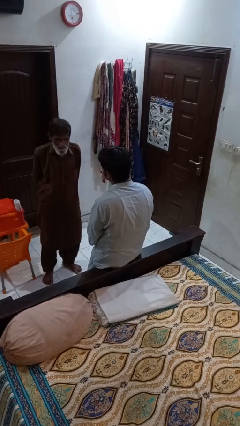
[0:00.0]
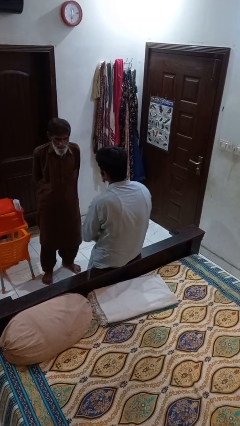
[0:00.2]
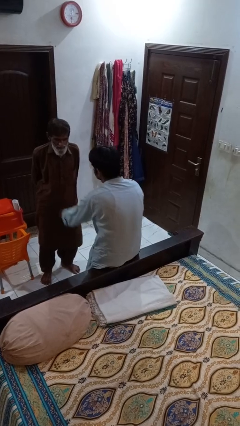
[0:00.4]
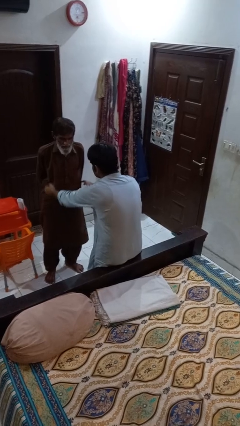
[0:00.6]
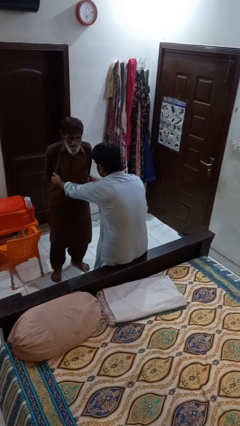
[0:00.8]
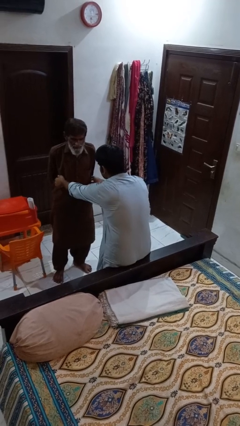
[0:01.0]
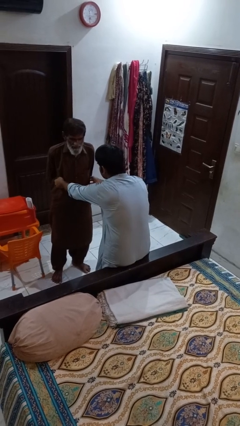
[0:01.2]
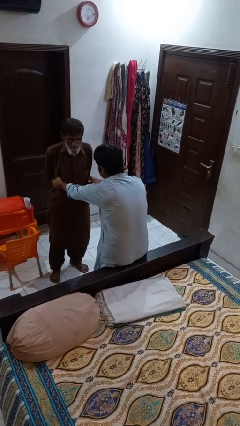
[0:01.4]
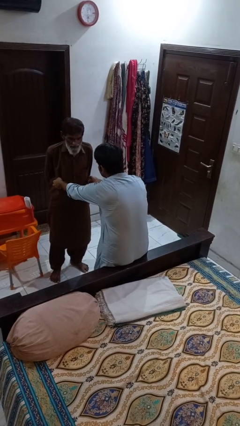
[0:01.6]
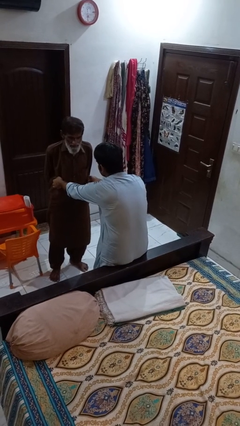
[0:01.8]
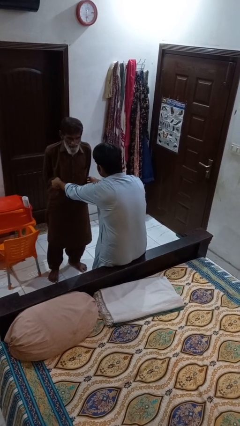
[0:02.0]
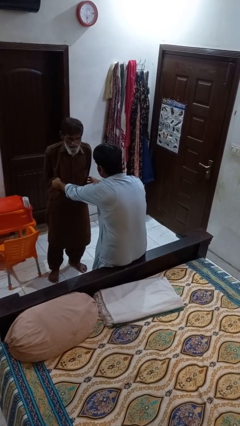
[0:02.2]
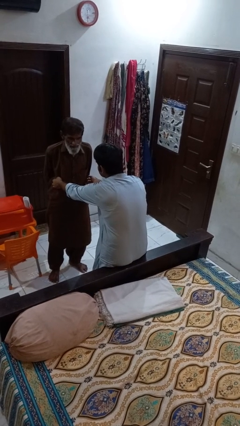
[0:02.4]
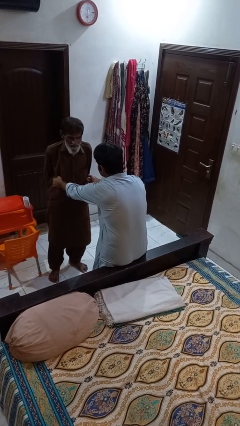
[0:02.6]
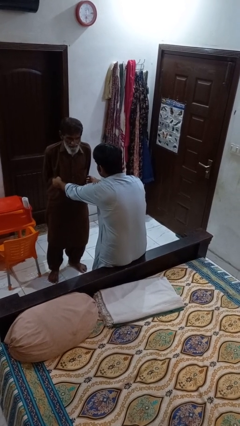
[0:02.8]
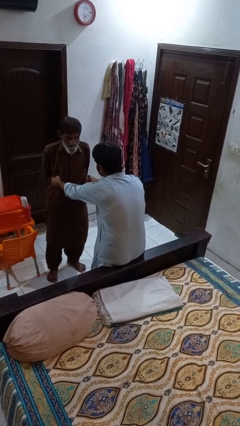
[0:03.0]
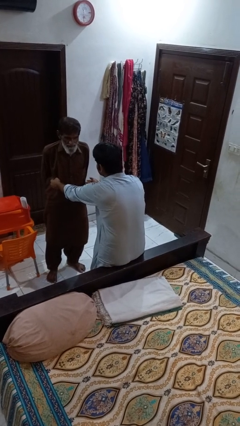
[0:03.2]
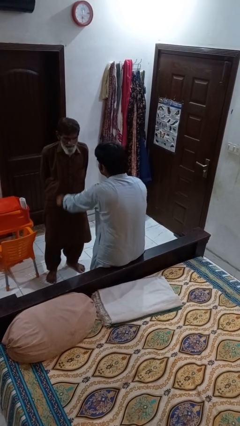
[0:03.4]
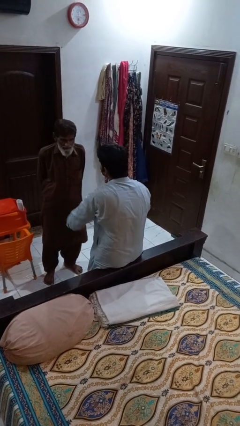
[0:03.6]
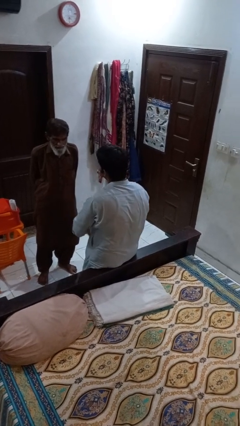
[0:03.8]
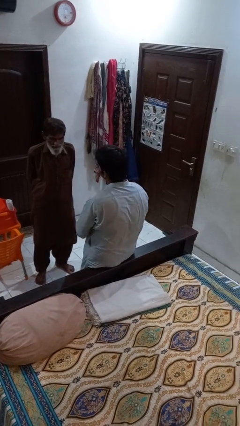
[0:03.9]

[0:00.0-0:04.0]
person tickles person

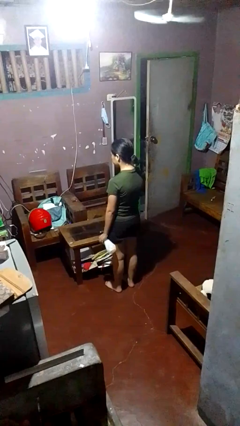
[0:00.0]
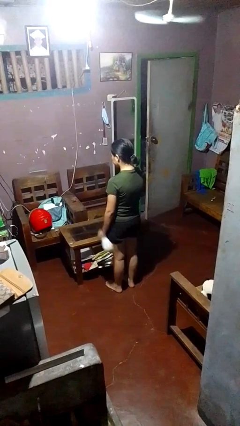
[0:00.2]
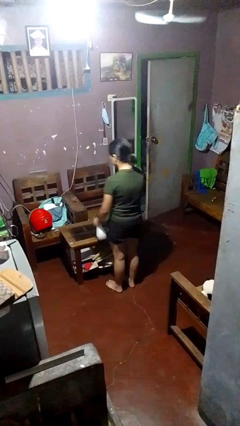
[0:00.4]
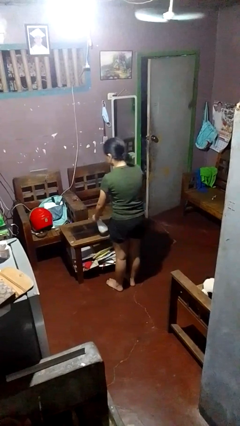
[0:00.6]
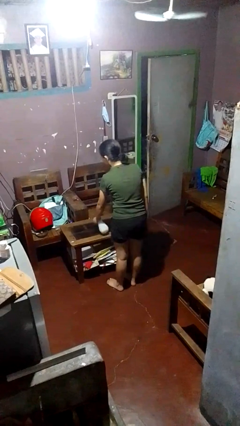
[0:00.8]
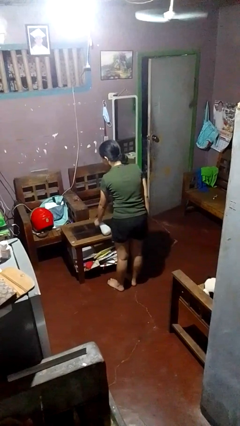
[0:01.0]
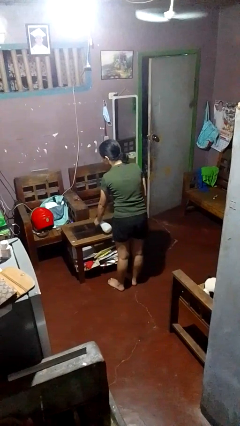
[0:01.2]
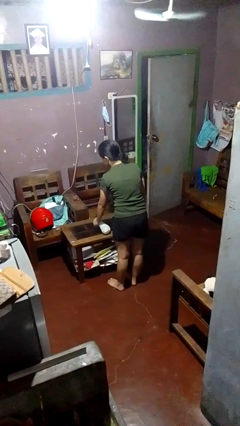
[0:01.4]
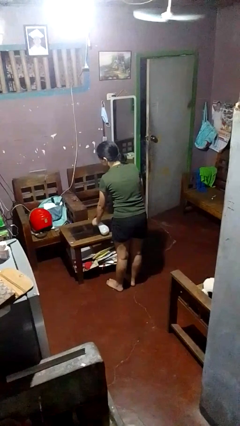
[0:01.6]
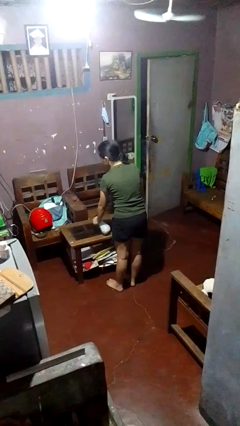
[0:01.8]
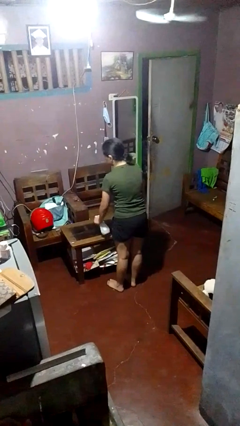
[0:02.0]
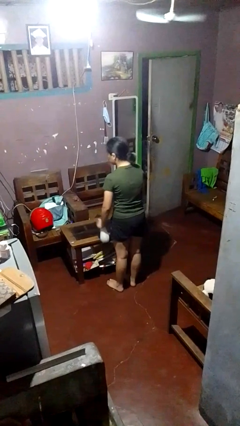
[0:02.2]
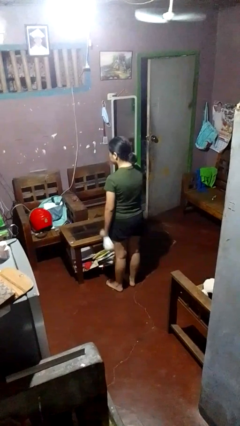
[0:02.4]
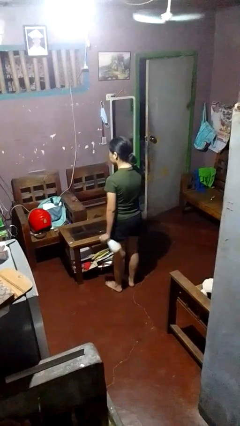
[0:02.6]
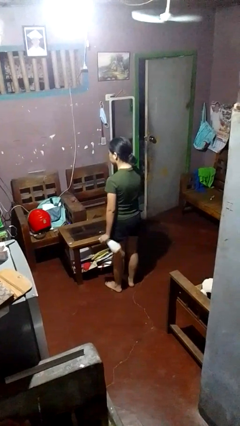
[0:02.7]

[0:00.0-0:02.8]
person sprays from bottle

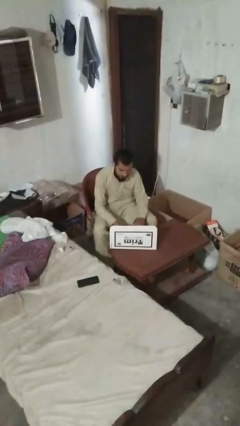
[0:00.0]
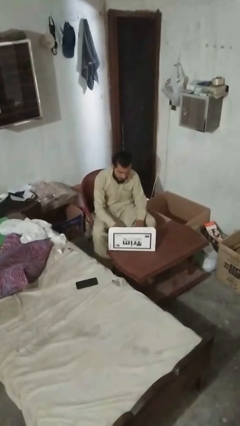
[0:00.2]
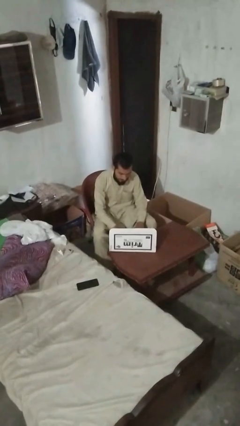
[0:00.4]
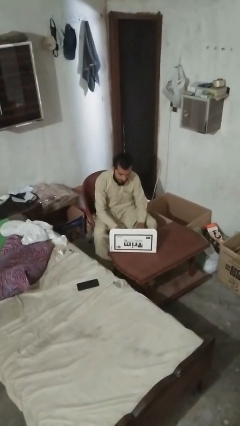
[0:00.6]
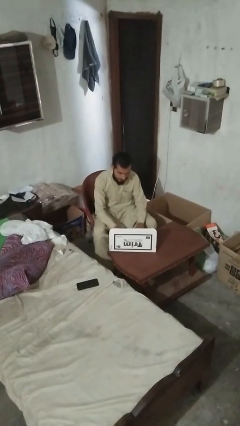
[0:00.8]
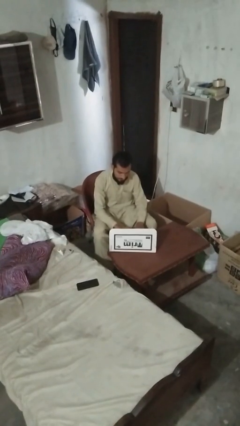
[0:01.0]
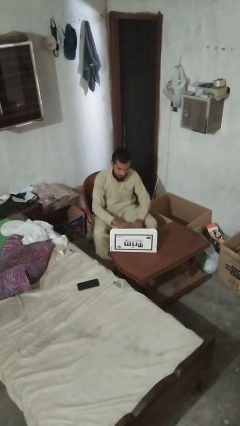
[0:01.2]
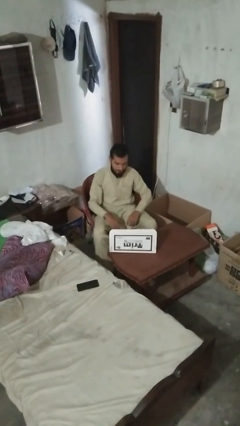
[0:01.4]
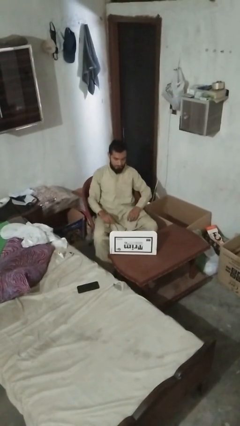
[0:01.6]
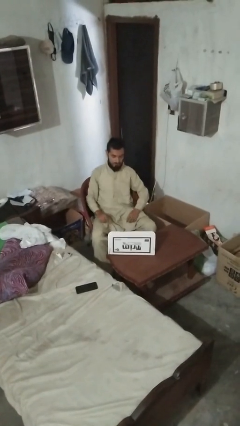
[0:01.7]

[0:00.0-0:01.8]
person interacts with tablet

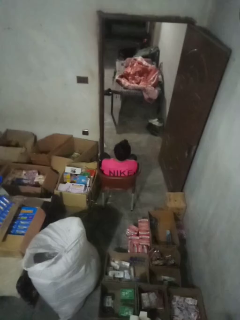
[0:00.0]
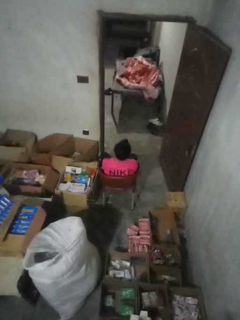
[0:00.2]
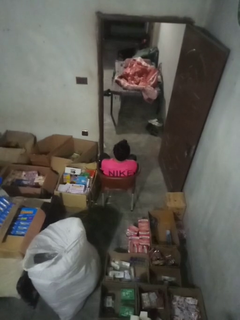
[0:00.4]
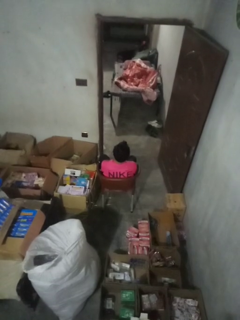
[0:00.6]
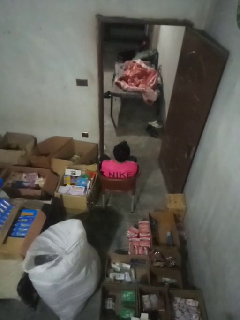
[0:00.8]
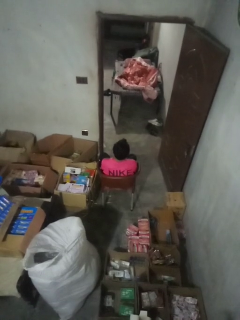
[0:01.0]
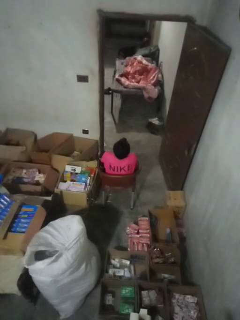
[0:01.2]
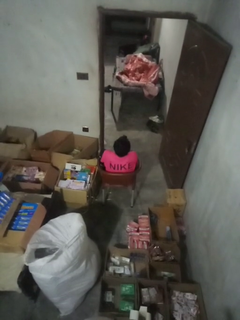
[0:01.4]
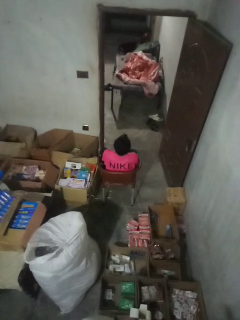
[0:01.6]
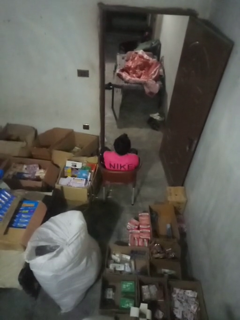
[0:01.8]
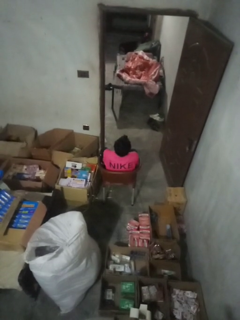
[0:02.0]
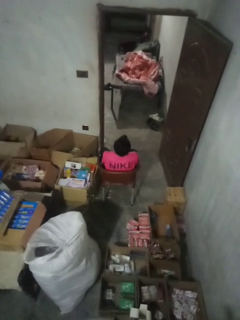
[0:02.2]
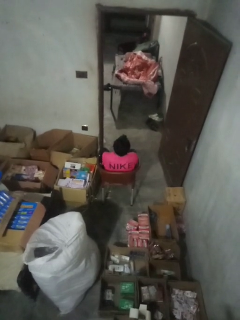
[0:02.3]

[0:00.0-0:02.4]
person shrugs

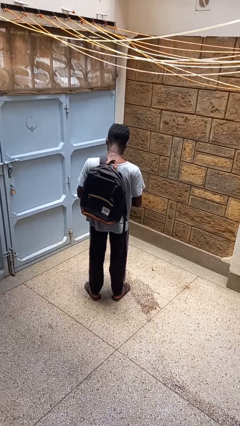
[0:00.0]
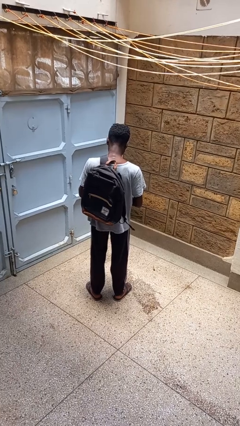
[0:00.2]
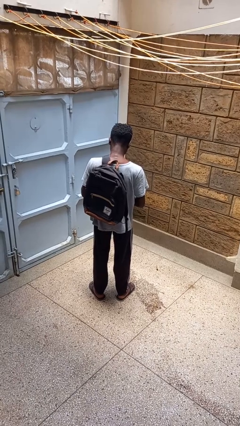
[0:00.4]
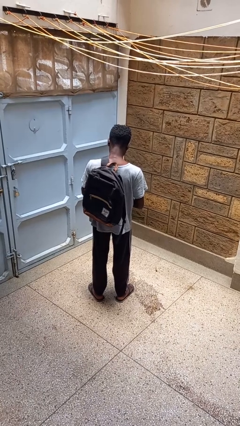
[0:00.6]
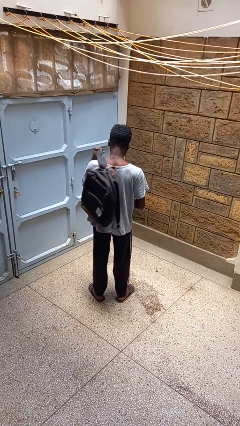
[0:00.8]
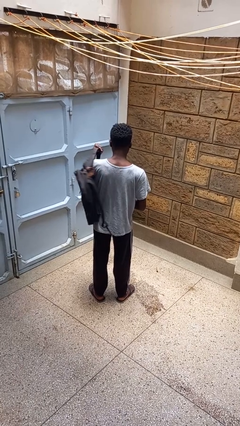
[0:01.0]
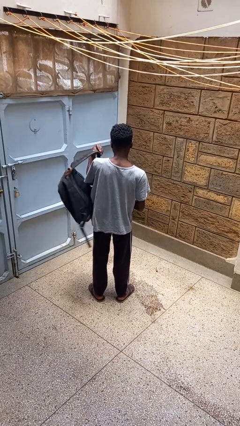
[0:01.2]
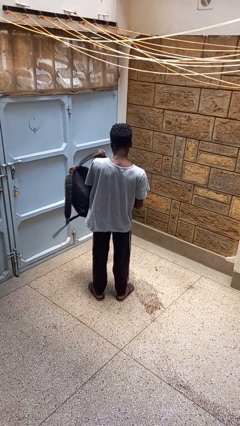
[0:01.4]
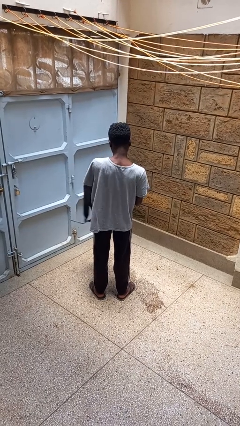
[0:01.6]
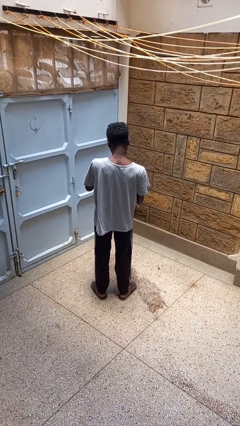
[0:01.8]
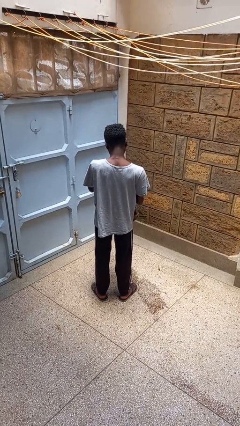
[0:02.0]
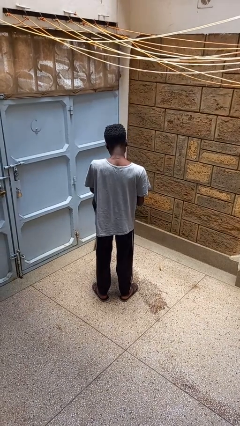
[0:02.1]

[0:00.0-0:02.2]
person takes off backpack

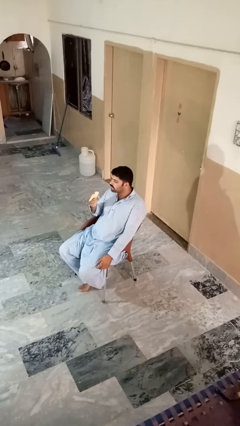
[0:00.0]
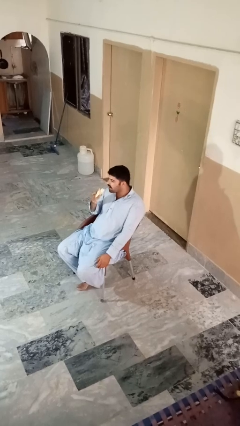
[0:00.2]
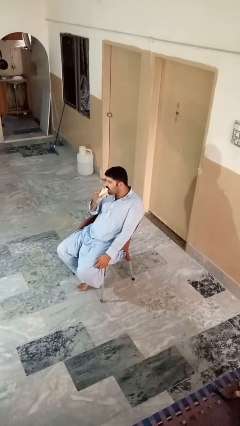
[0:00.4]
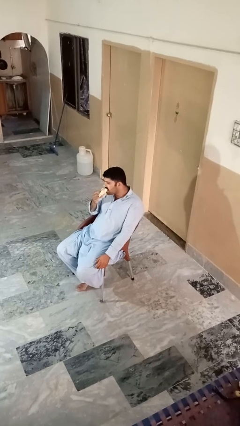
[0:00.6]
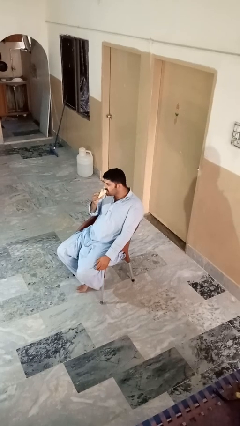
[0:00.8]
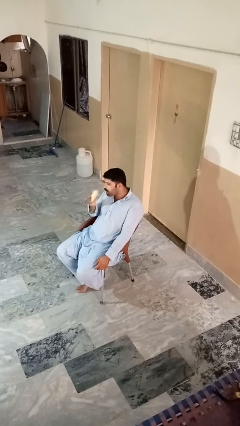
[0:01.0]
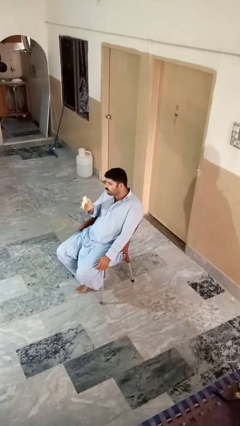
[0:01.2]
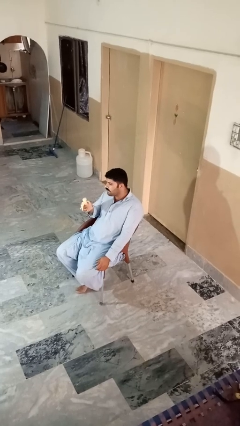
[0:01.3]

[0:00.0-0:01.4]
person eats banana

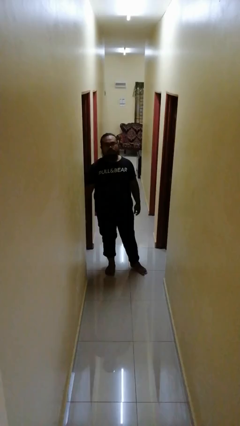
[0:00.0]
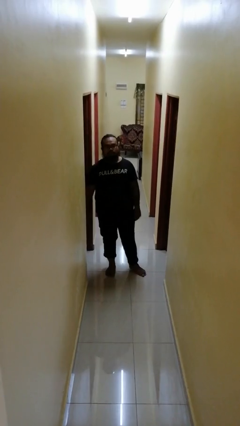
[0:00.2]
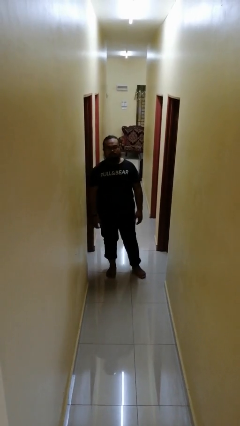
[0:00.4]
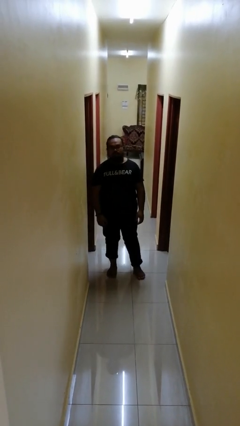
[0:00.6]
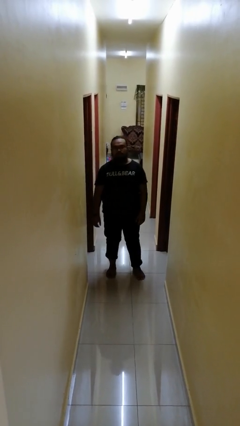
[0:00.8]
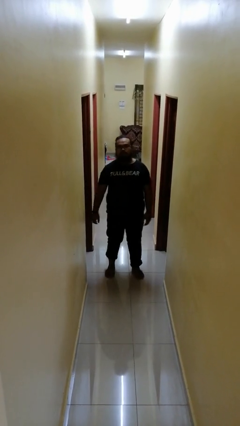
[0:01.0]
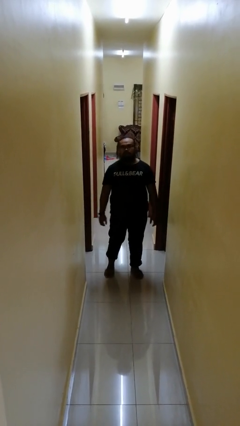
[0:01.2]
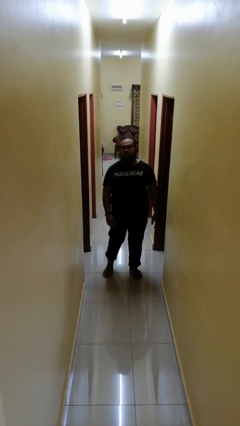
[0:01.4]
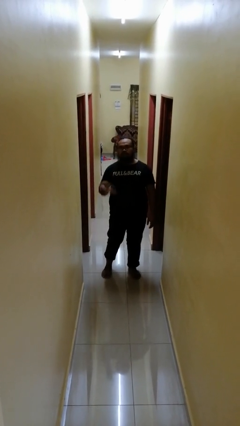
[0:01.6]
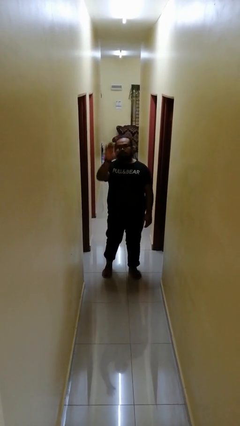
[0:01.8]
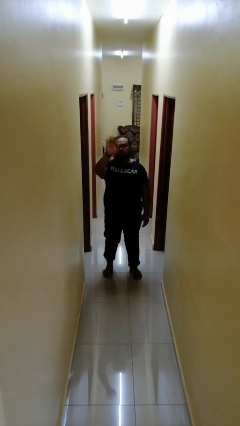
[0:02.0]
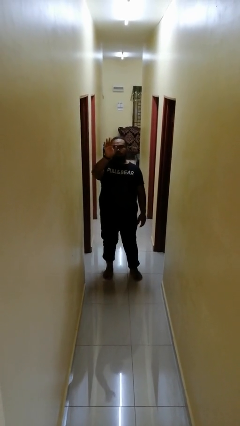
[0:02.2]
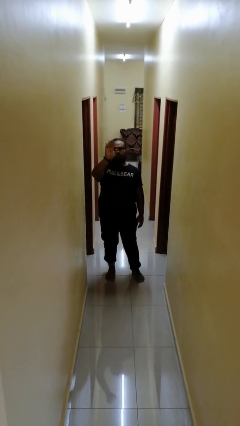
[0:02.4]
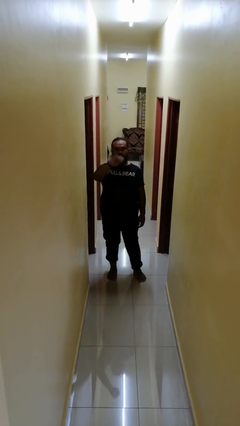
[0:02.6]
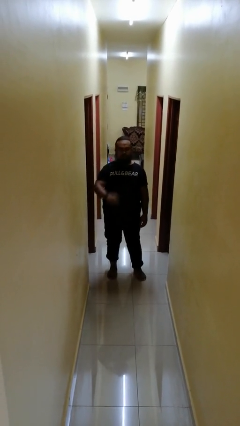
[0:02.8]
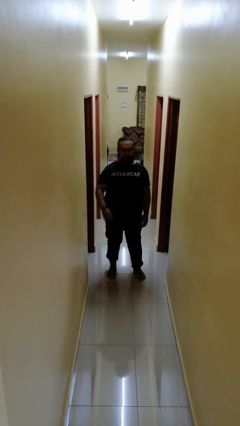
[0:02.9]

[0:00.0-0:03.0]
person waves at person

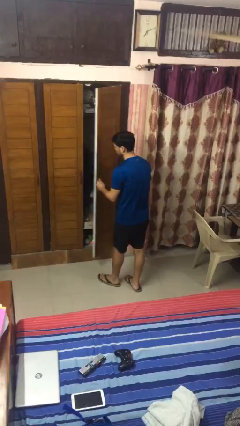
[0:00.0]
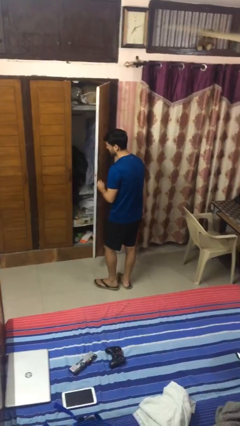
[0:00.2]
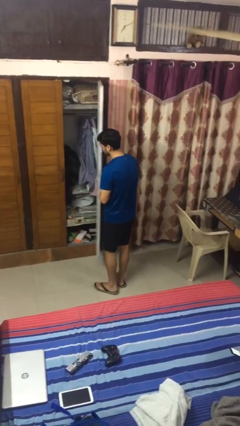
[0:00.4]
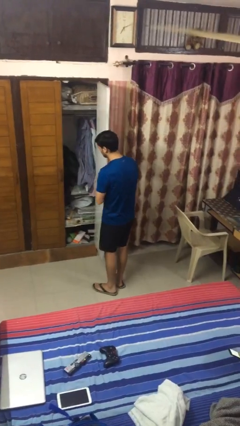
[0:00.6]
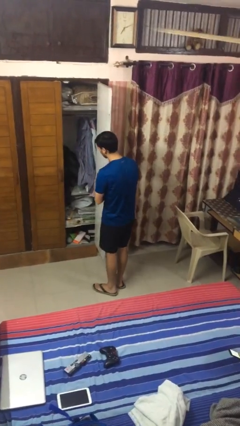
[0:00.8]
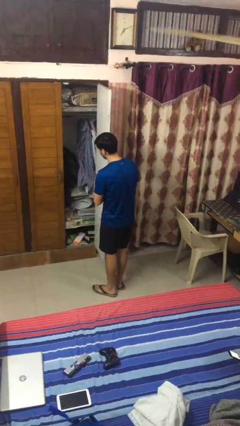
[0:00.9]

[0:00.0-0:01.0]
person opens facility door
